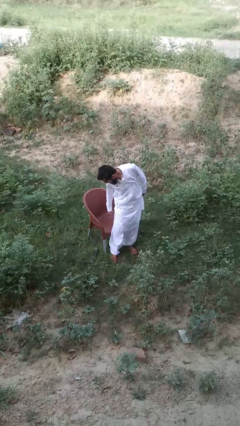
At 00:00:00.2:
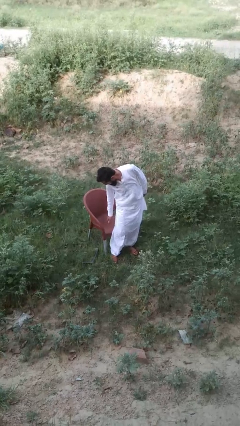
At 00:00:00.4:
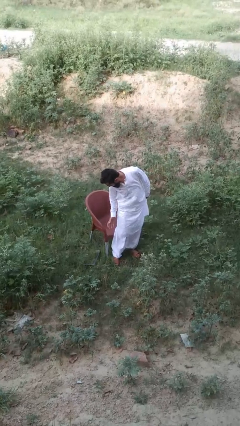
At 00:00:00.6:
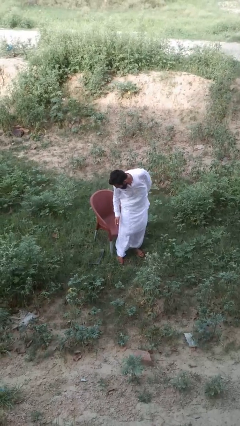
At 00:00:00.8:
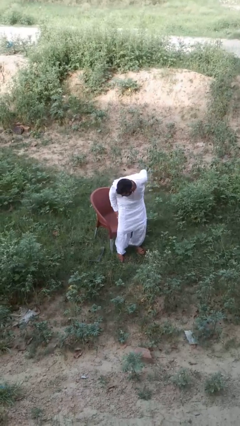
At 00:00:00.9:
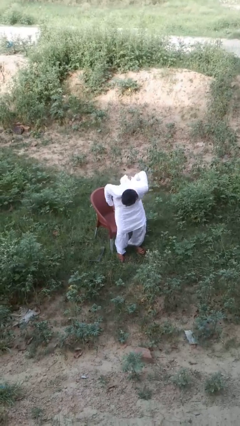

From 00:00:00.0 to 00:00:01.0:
person sits down

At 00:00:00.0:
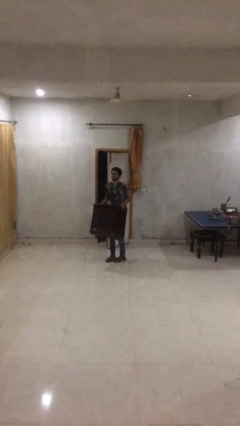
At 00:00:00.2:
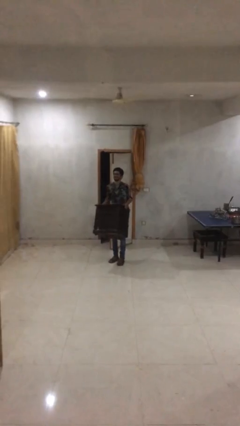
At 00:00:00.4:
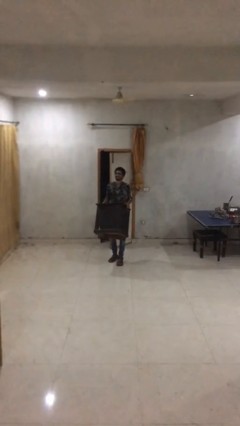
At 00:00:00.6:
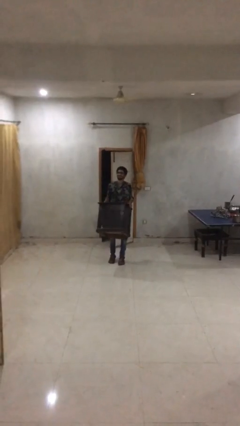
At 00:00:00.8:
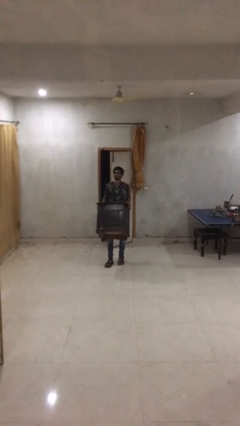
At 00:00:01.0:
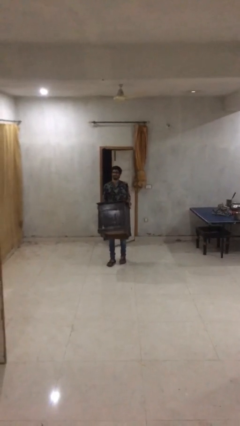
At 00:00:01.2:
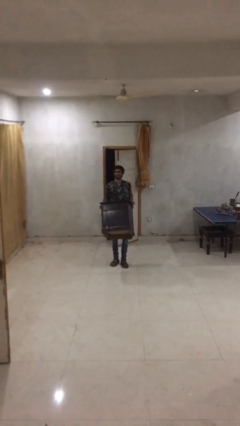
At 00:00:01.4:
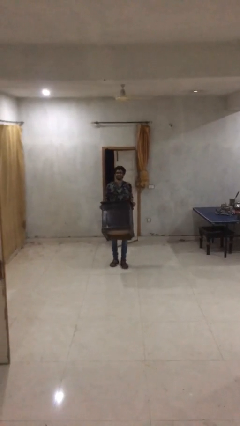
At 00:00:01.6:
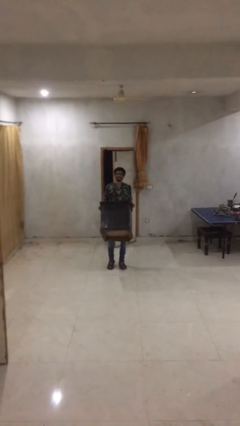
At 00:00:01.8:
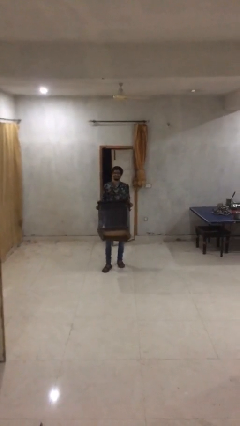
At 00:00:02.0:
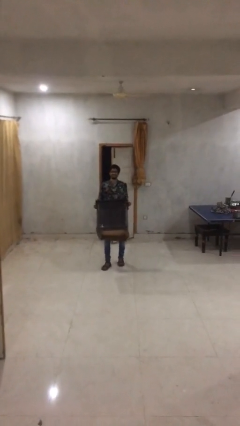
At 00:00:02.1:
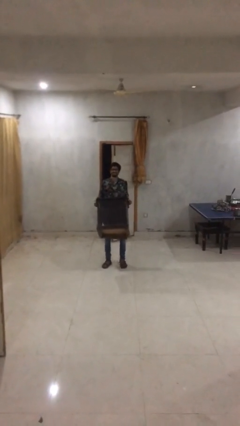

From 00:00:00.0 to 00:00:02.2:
person carries heavy object

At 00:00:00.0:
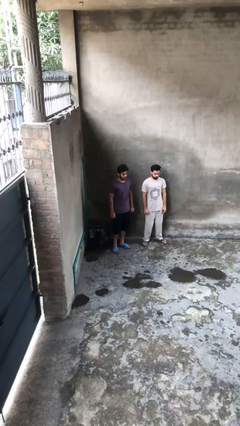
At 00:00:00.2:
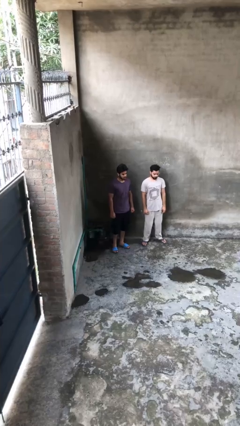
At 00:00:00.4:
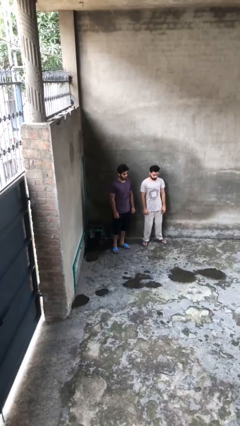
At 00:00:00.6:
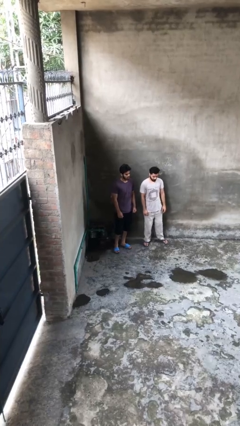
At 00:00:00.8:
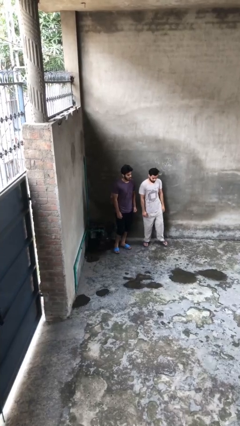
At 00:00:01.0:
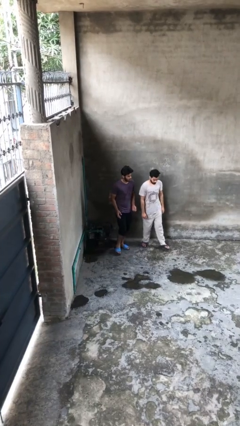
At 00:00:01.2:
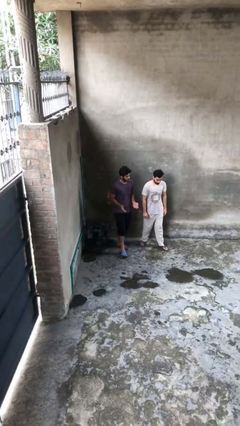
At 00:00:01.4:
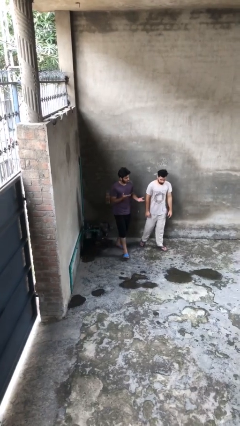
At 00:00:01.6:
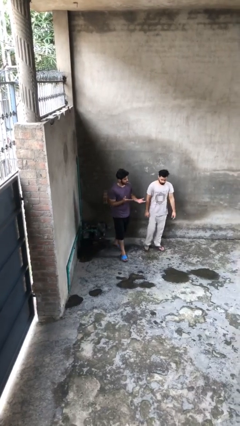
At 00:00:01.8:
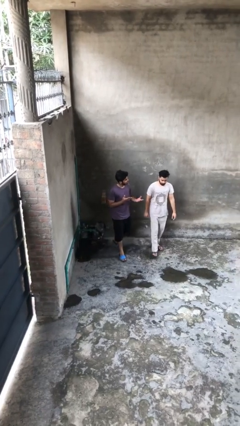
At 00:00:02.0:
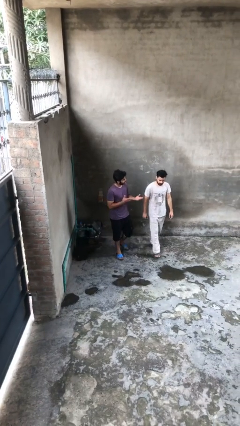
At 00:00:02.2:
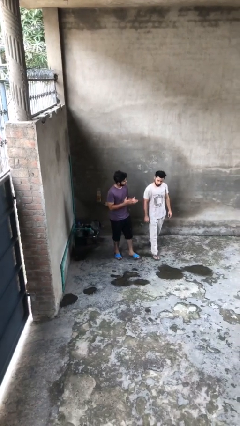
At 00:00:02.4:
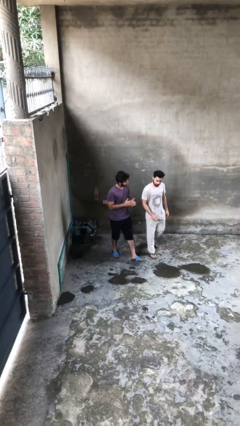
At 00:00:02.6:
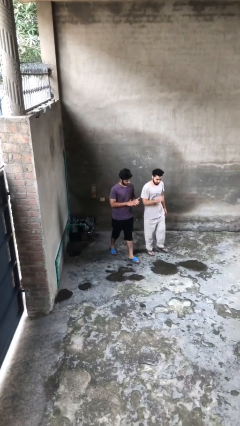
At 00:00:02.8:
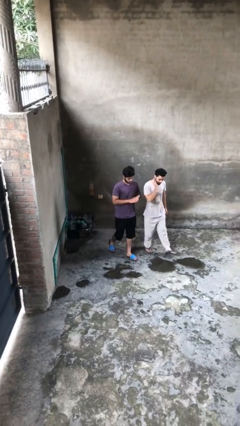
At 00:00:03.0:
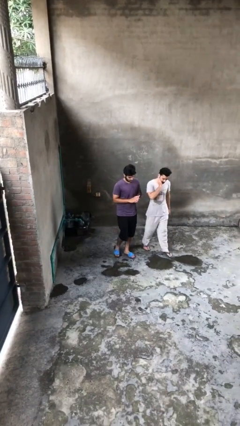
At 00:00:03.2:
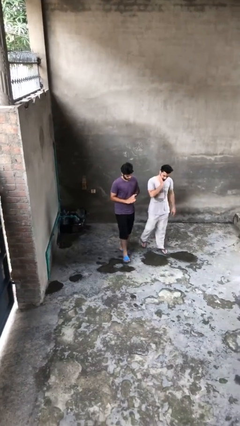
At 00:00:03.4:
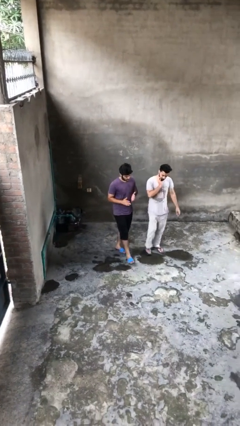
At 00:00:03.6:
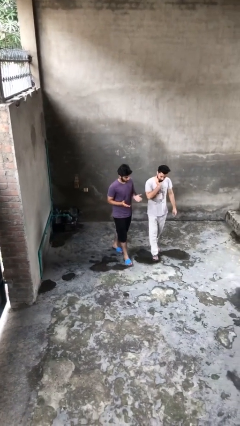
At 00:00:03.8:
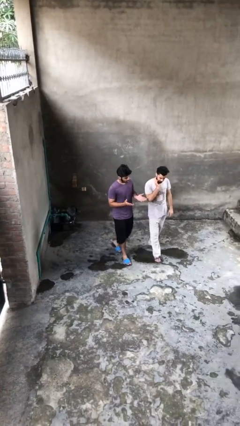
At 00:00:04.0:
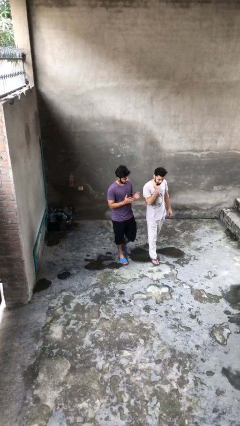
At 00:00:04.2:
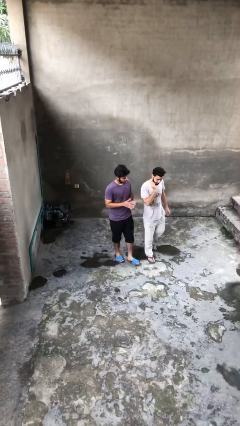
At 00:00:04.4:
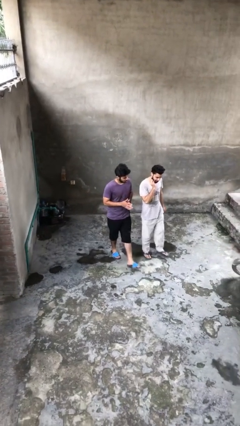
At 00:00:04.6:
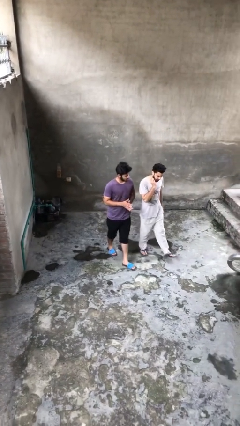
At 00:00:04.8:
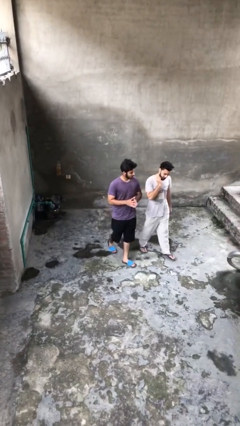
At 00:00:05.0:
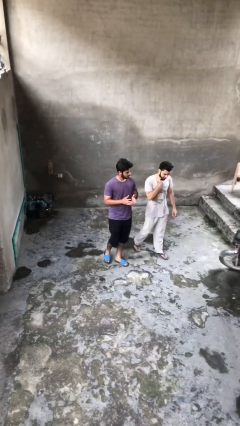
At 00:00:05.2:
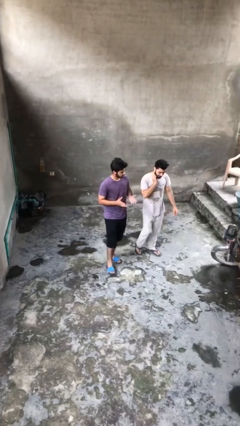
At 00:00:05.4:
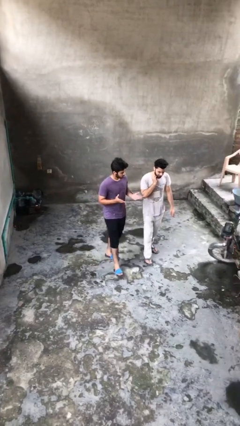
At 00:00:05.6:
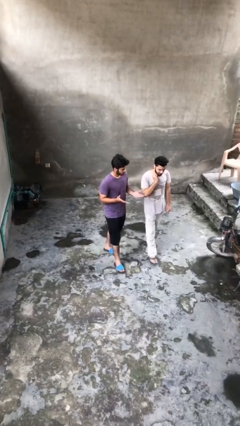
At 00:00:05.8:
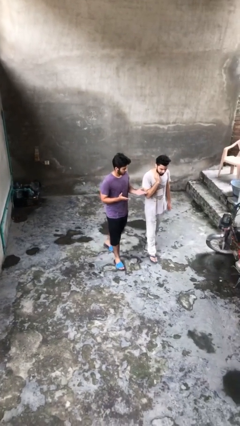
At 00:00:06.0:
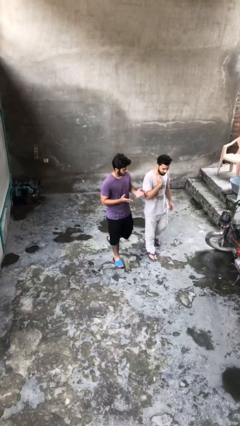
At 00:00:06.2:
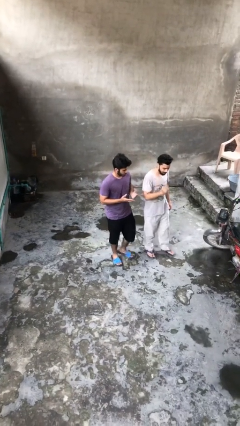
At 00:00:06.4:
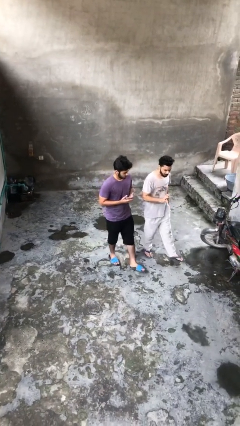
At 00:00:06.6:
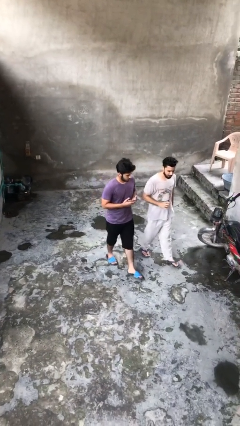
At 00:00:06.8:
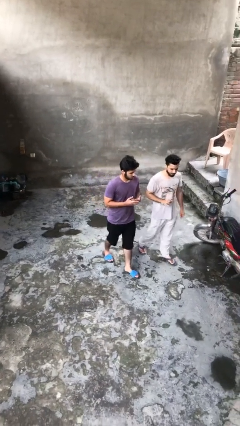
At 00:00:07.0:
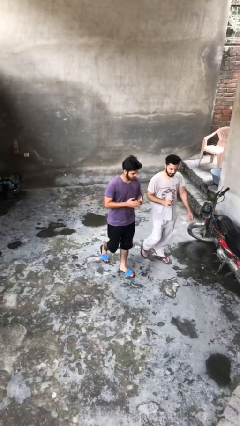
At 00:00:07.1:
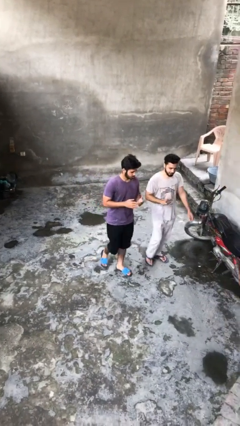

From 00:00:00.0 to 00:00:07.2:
person talks to person

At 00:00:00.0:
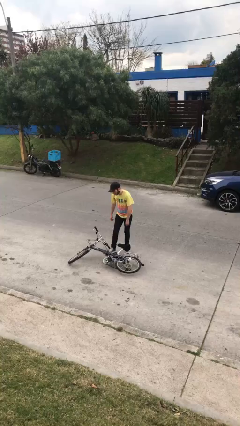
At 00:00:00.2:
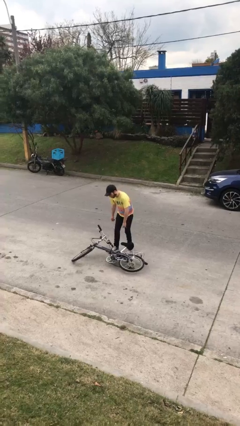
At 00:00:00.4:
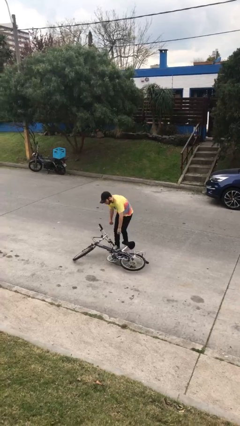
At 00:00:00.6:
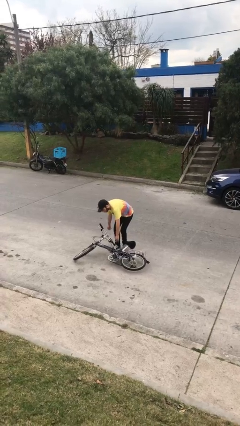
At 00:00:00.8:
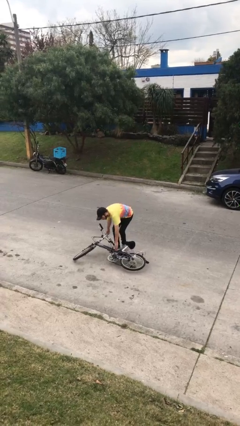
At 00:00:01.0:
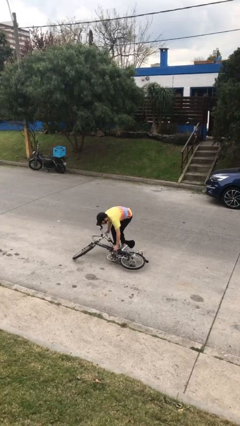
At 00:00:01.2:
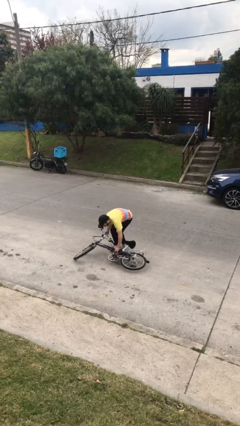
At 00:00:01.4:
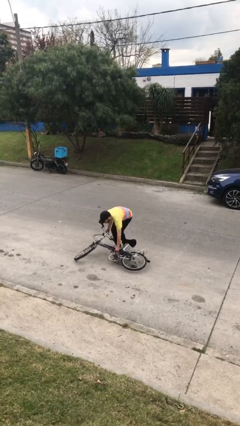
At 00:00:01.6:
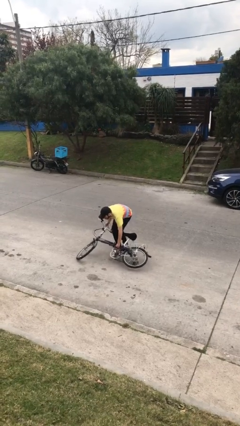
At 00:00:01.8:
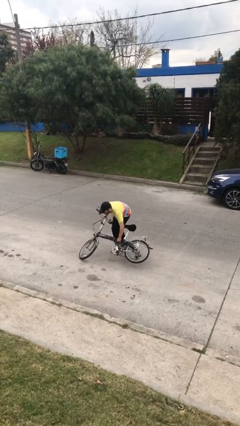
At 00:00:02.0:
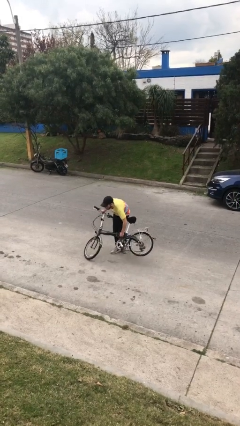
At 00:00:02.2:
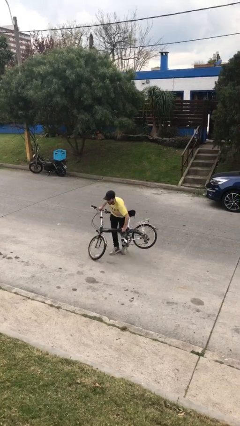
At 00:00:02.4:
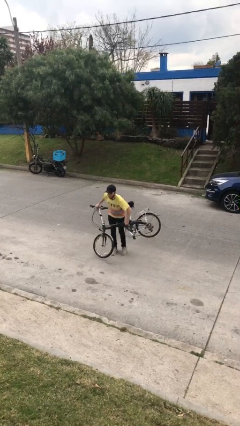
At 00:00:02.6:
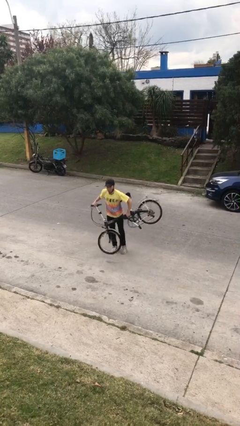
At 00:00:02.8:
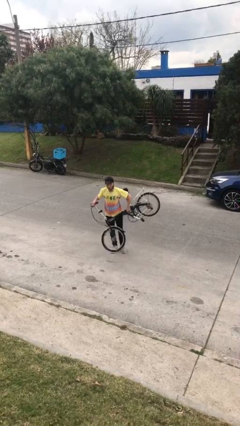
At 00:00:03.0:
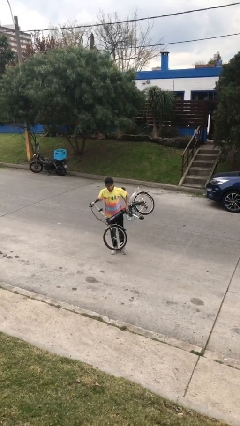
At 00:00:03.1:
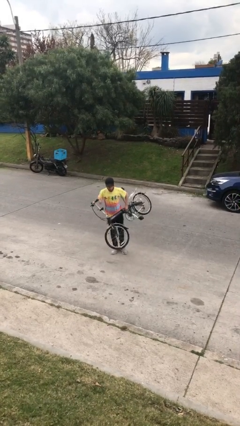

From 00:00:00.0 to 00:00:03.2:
person picks up object from floor

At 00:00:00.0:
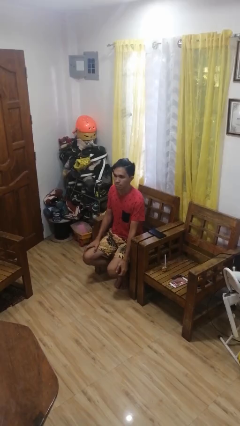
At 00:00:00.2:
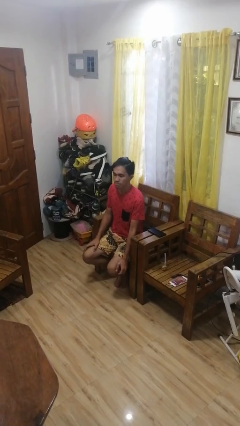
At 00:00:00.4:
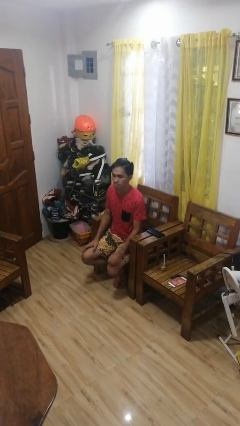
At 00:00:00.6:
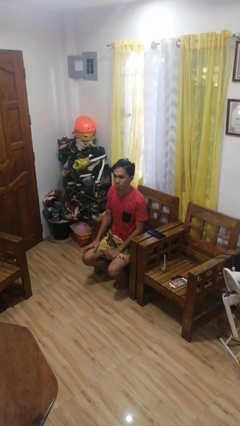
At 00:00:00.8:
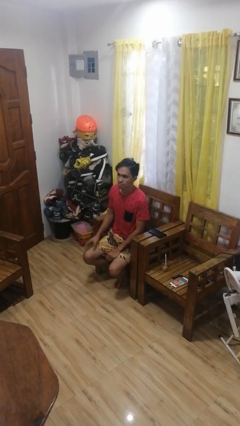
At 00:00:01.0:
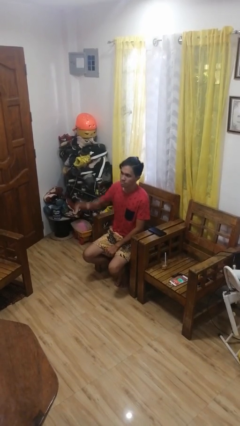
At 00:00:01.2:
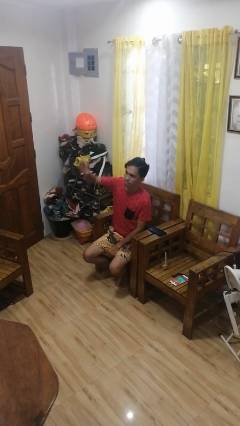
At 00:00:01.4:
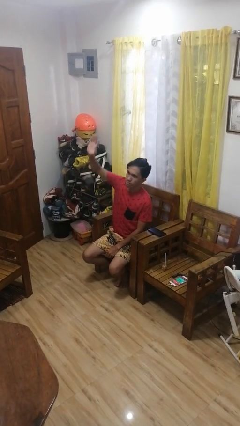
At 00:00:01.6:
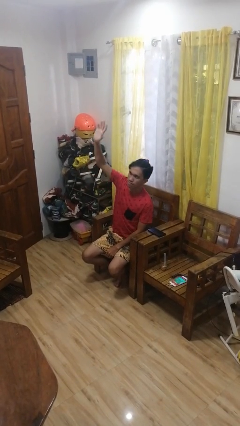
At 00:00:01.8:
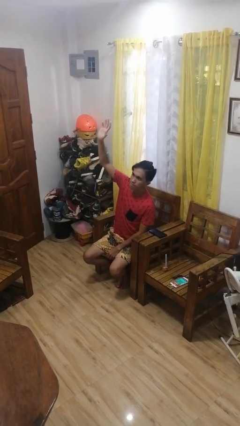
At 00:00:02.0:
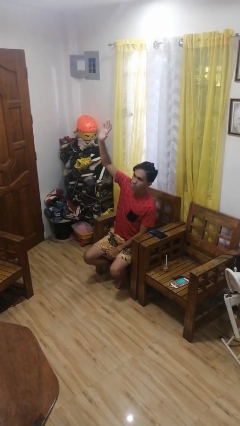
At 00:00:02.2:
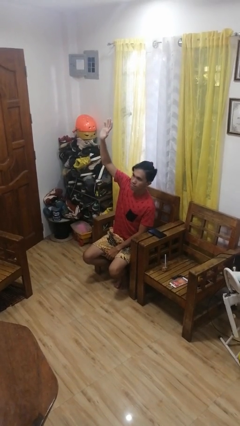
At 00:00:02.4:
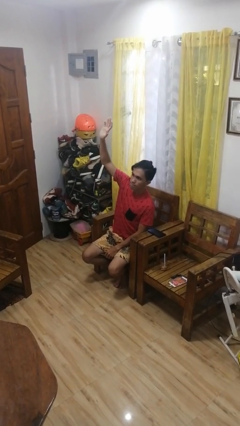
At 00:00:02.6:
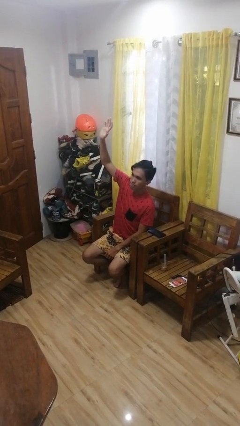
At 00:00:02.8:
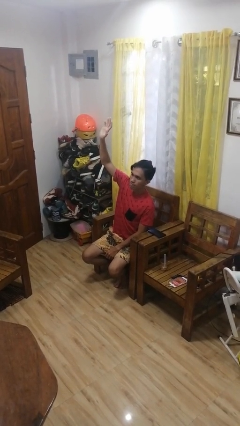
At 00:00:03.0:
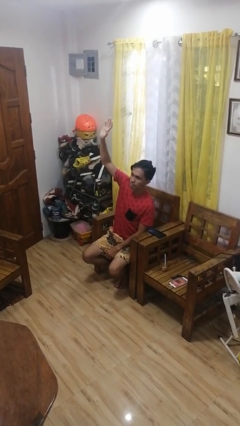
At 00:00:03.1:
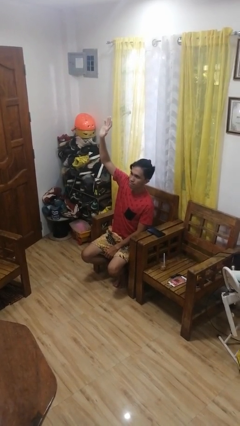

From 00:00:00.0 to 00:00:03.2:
person gestures raise hand

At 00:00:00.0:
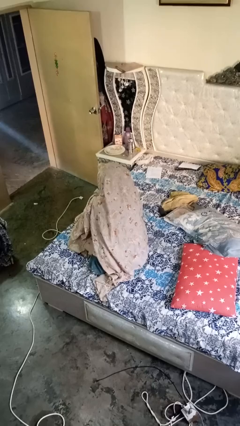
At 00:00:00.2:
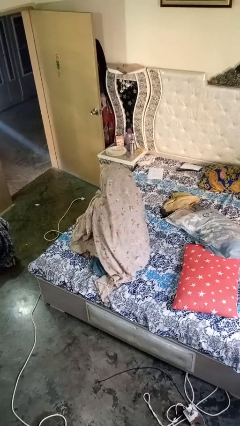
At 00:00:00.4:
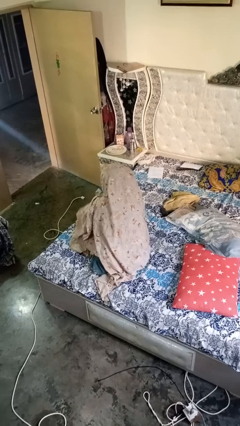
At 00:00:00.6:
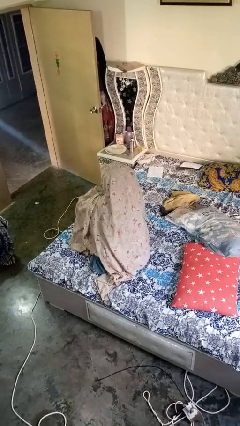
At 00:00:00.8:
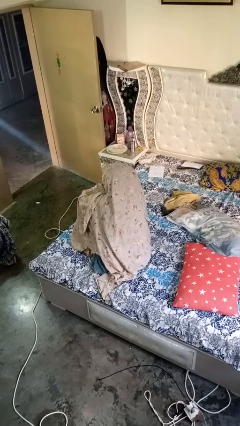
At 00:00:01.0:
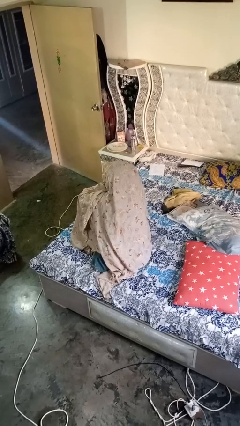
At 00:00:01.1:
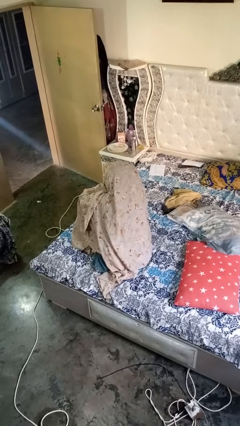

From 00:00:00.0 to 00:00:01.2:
person looks at wristwatch
